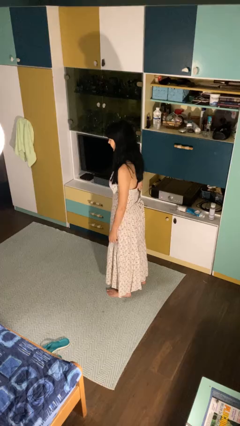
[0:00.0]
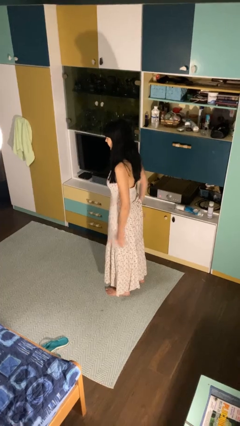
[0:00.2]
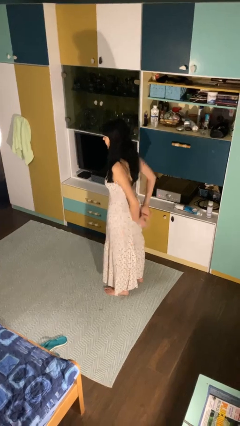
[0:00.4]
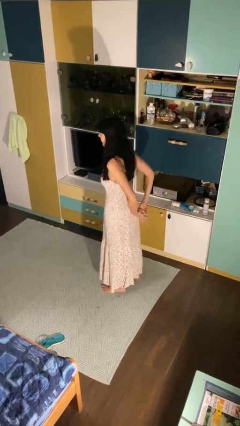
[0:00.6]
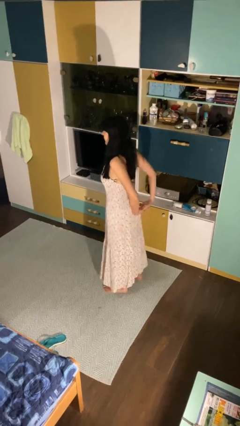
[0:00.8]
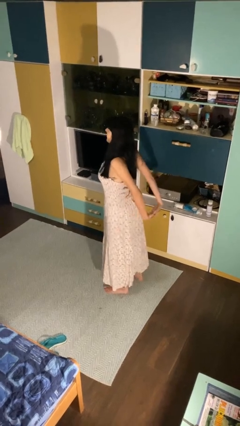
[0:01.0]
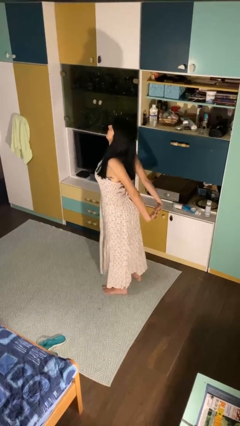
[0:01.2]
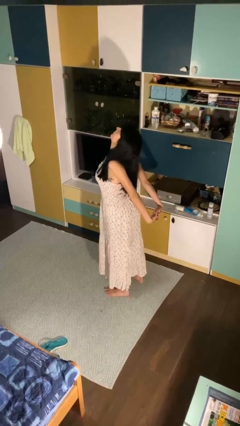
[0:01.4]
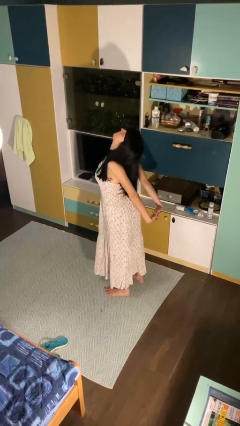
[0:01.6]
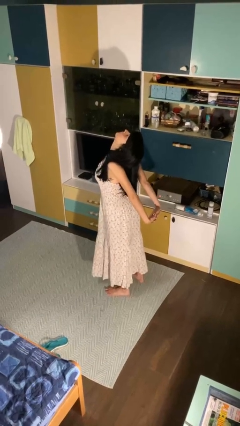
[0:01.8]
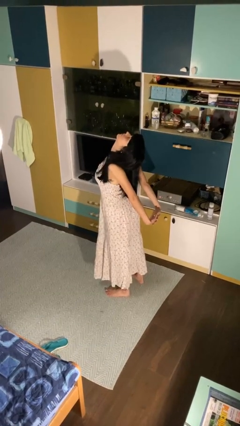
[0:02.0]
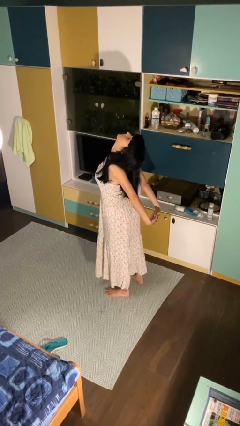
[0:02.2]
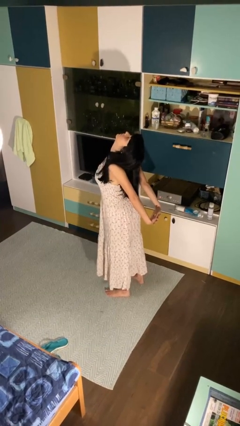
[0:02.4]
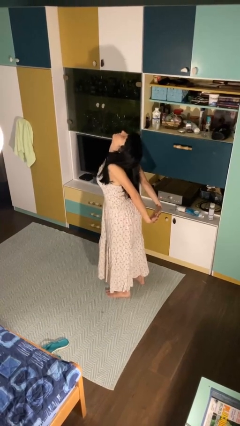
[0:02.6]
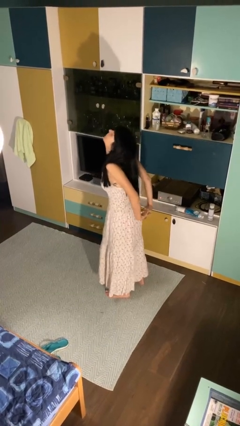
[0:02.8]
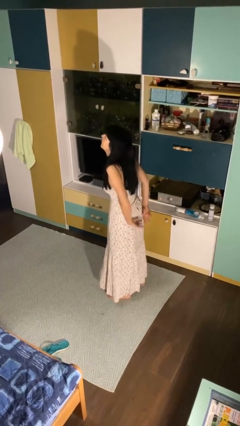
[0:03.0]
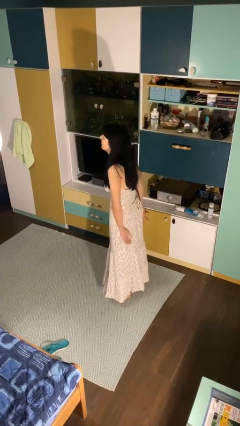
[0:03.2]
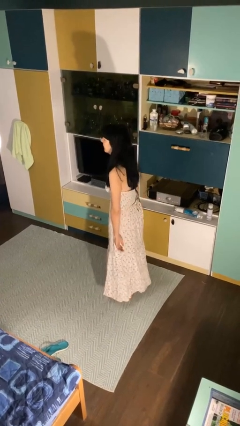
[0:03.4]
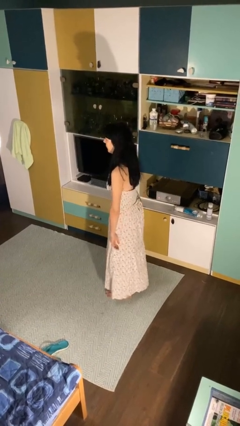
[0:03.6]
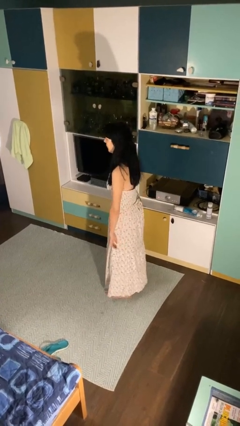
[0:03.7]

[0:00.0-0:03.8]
person stretches back

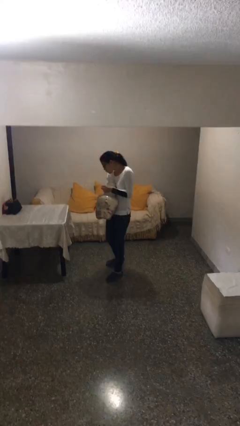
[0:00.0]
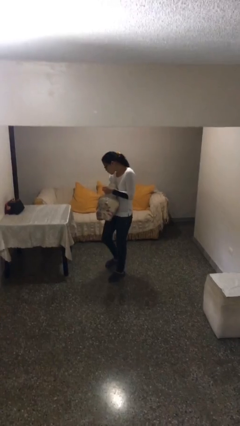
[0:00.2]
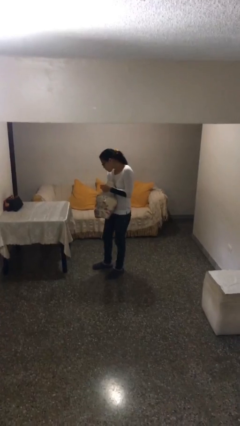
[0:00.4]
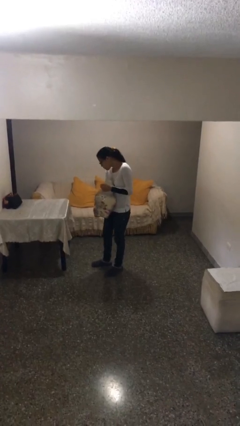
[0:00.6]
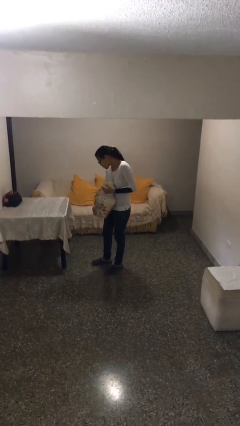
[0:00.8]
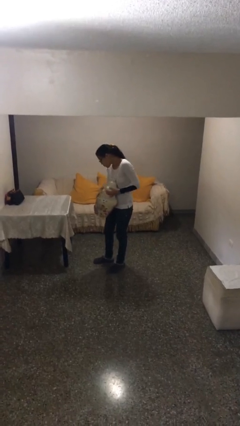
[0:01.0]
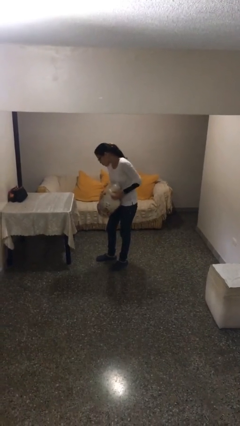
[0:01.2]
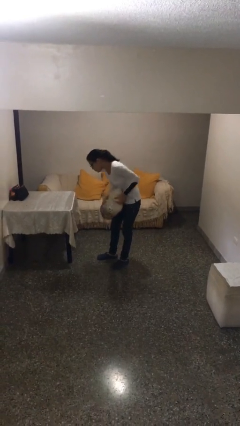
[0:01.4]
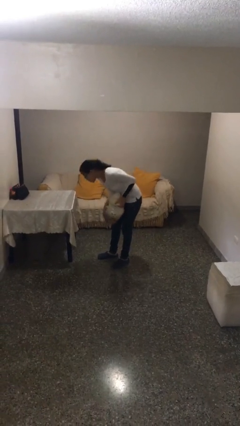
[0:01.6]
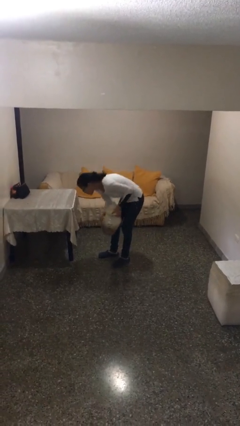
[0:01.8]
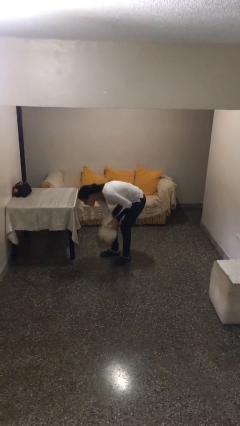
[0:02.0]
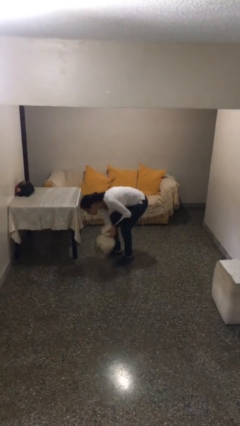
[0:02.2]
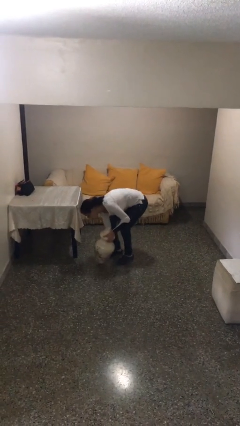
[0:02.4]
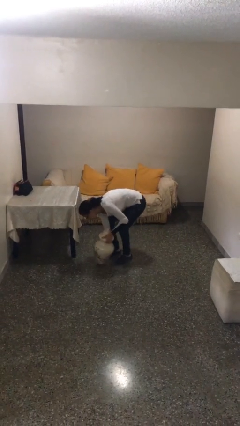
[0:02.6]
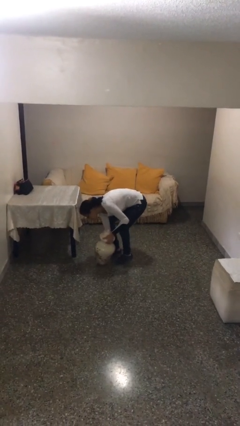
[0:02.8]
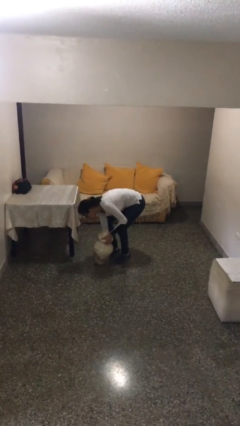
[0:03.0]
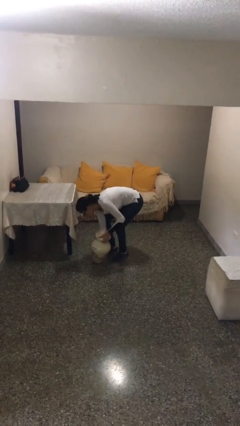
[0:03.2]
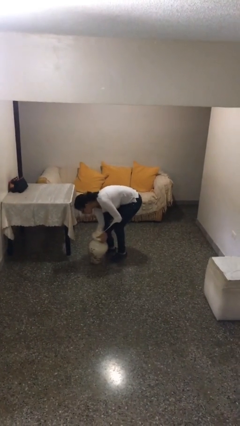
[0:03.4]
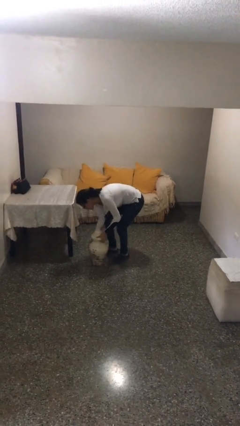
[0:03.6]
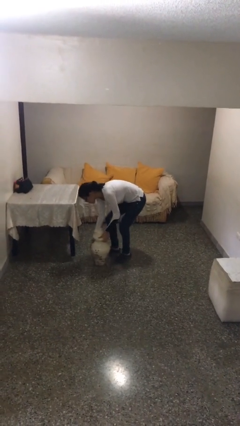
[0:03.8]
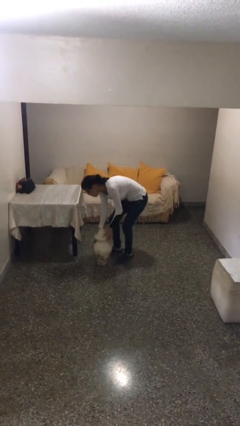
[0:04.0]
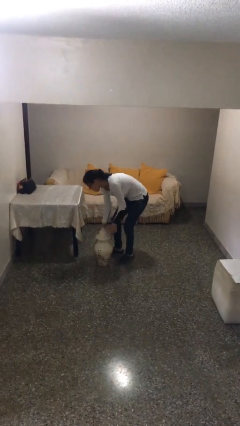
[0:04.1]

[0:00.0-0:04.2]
person puts down object on floor

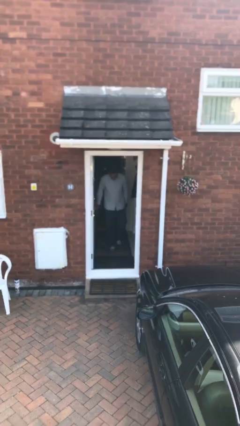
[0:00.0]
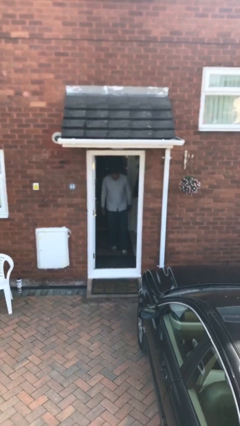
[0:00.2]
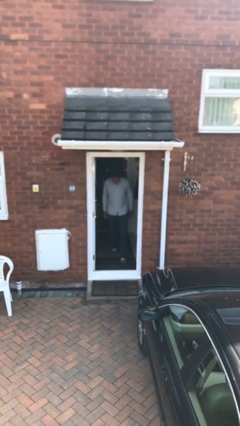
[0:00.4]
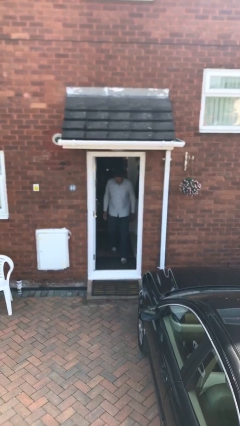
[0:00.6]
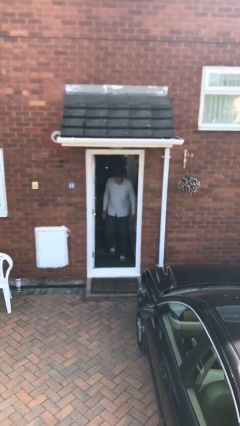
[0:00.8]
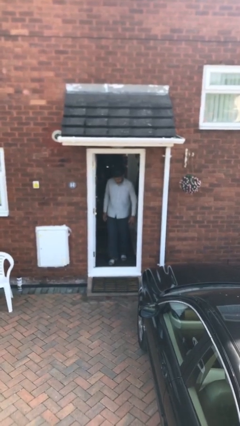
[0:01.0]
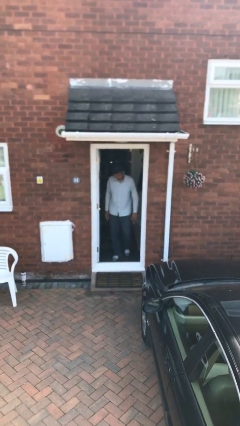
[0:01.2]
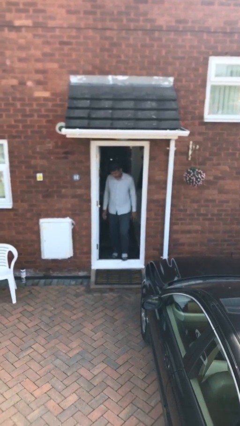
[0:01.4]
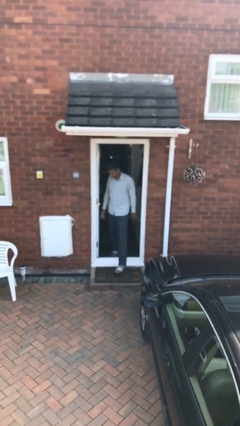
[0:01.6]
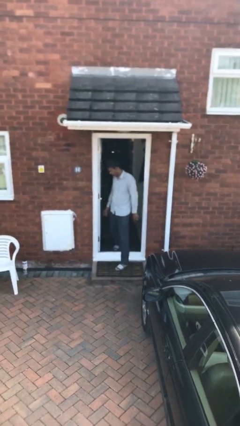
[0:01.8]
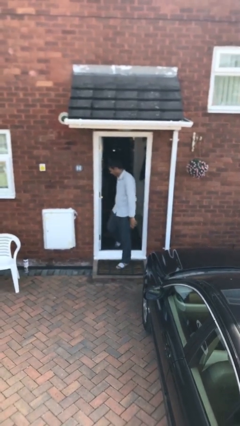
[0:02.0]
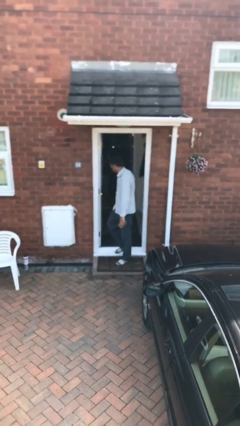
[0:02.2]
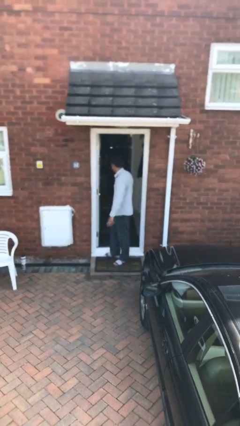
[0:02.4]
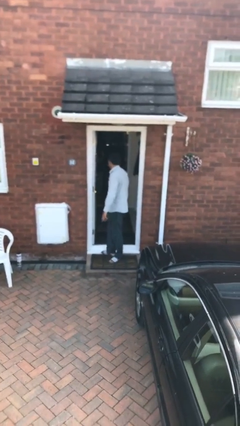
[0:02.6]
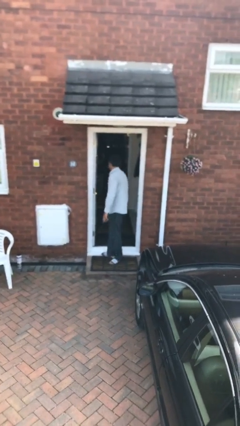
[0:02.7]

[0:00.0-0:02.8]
person enters scene through structure

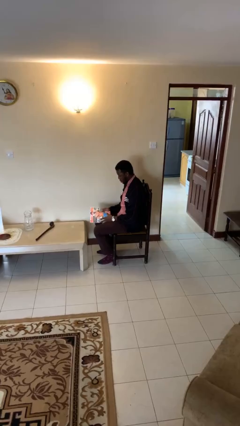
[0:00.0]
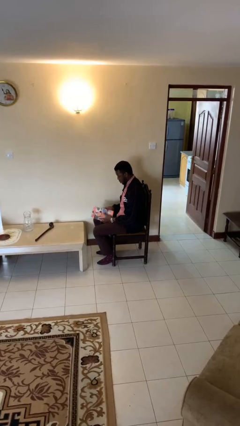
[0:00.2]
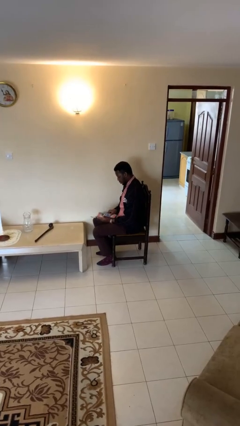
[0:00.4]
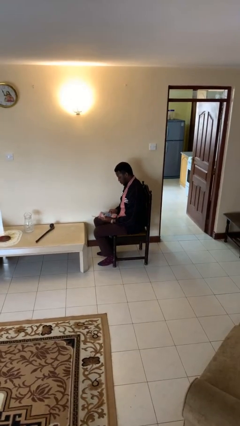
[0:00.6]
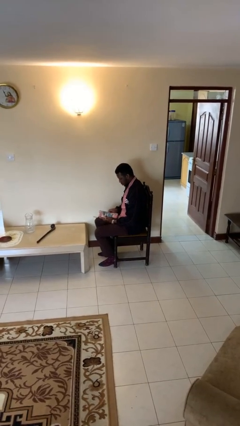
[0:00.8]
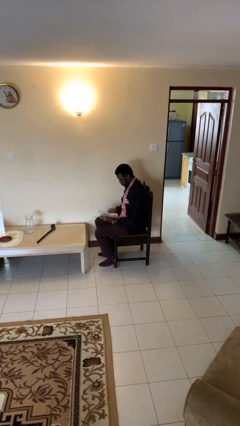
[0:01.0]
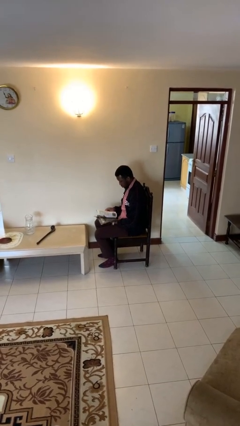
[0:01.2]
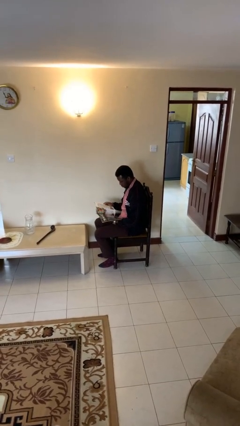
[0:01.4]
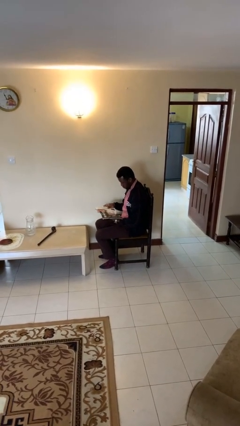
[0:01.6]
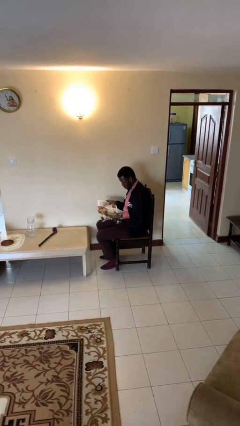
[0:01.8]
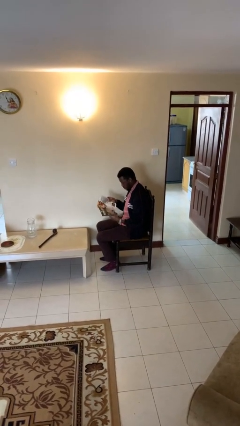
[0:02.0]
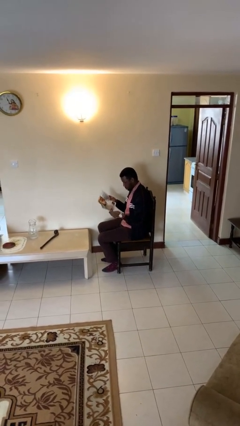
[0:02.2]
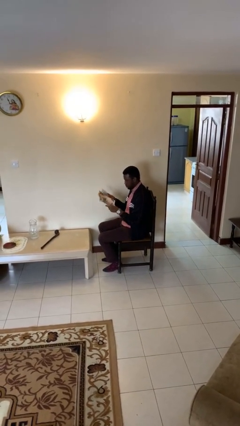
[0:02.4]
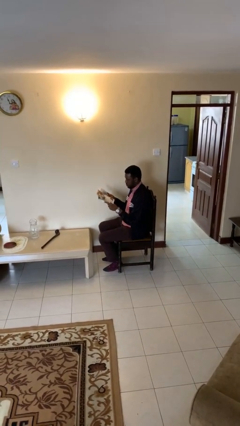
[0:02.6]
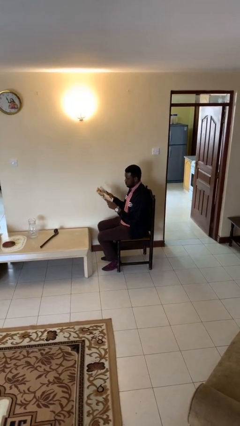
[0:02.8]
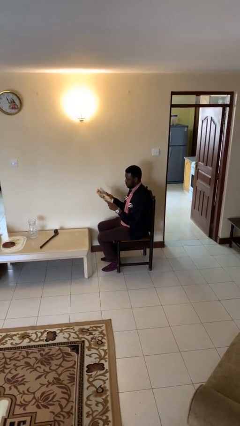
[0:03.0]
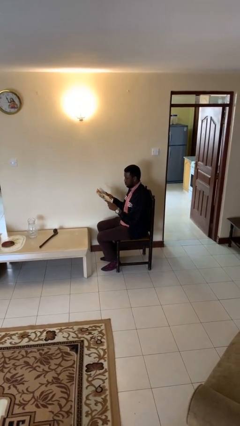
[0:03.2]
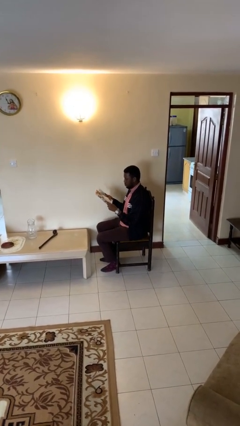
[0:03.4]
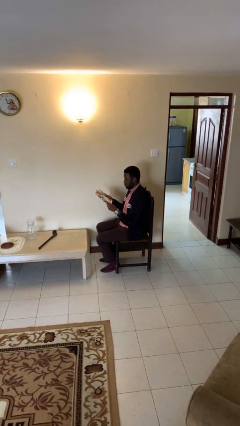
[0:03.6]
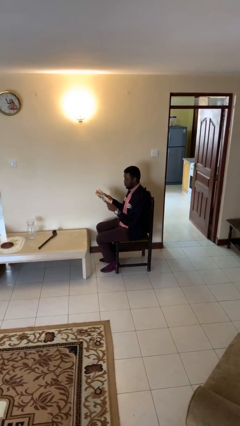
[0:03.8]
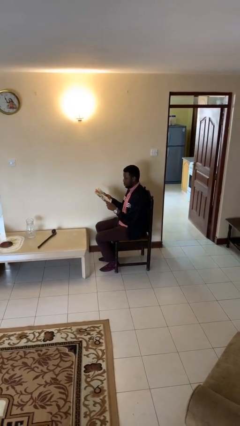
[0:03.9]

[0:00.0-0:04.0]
person reads document

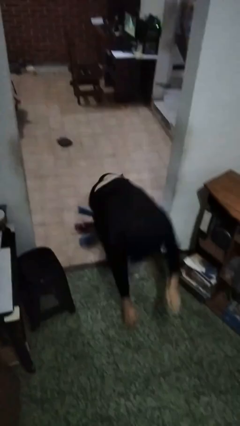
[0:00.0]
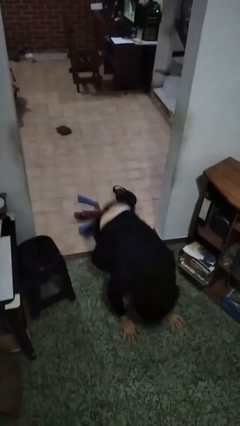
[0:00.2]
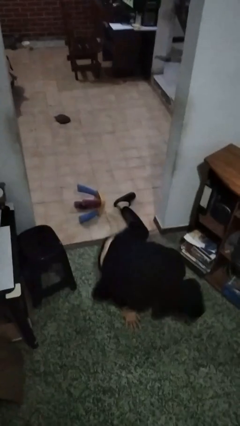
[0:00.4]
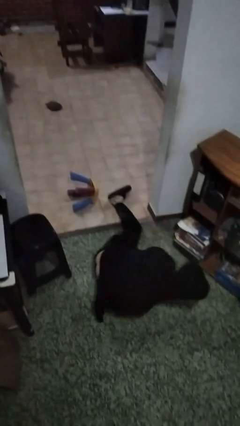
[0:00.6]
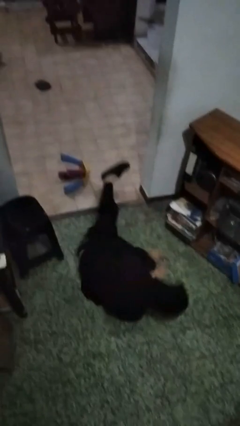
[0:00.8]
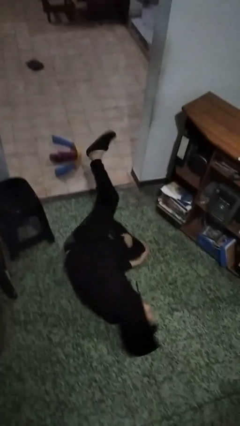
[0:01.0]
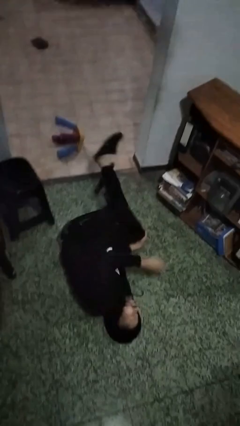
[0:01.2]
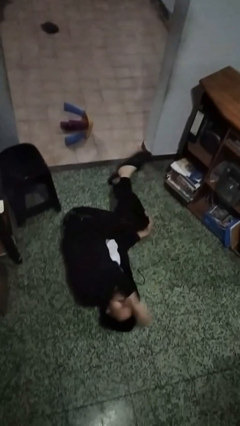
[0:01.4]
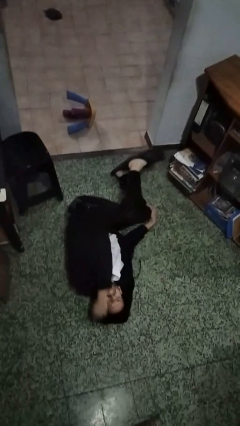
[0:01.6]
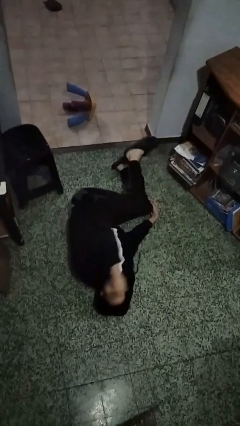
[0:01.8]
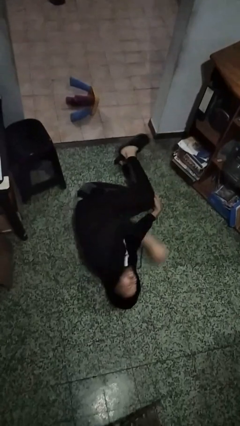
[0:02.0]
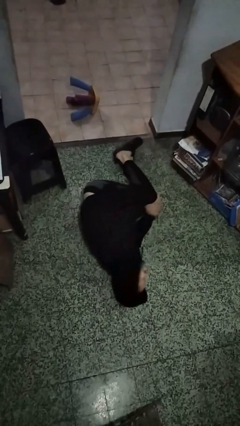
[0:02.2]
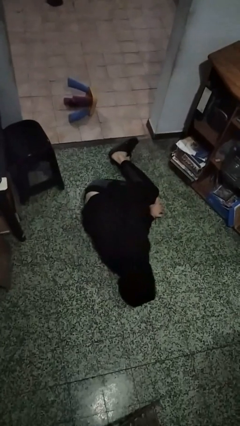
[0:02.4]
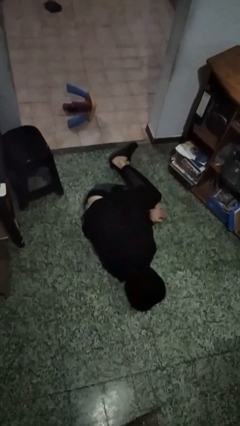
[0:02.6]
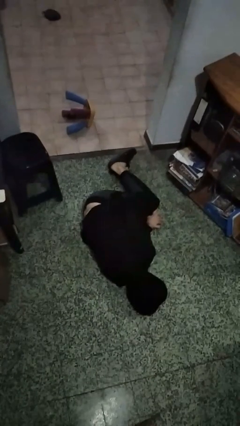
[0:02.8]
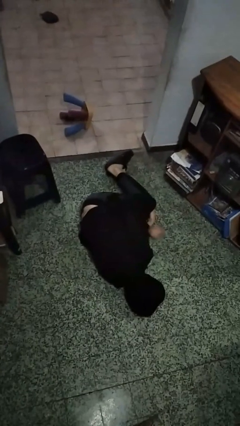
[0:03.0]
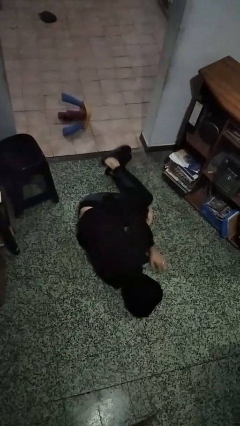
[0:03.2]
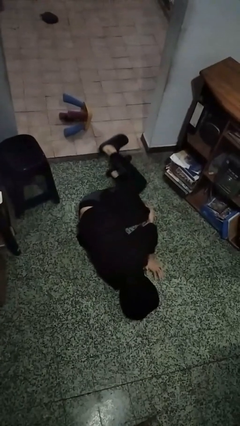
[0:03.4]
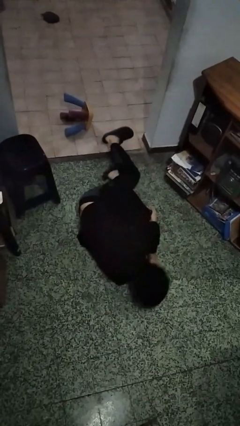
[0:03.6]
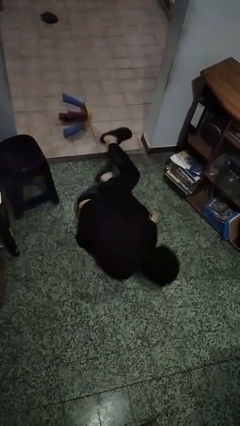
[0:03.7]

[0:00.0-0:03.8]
person lies down on floor
